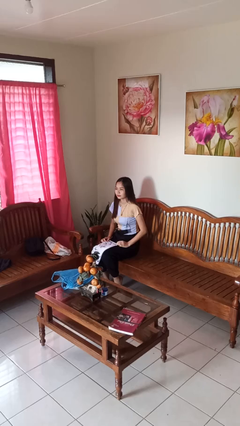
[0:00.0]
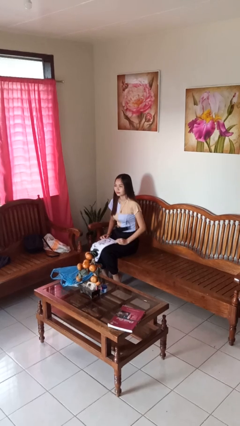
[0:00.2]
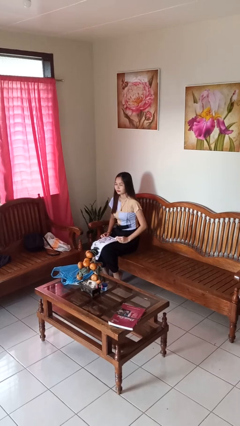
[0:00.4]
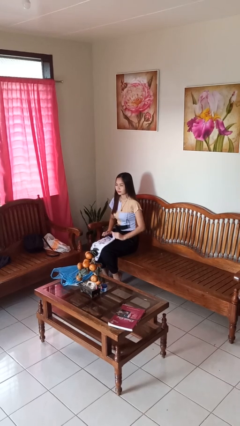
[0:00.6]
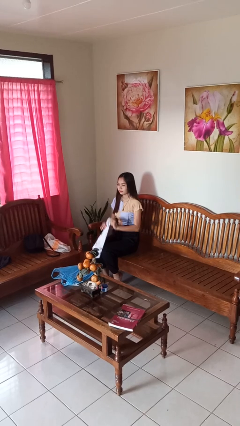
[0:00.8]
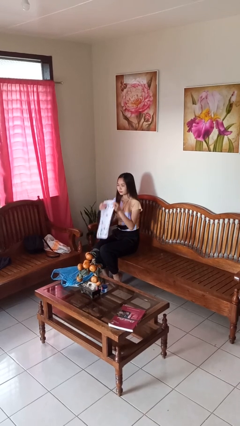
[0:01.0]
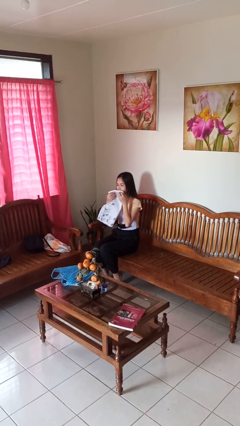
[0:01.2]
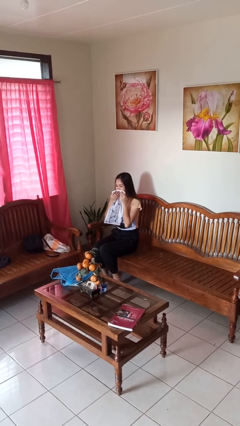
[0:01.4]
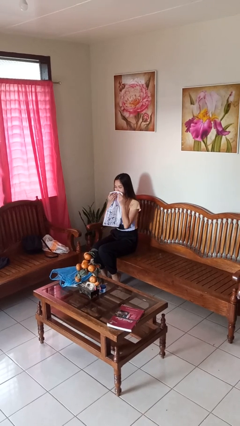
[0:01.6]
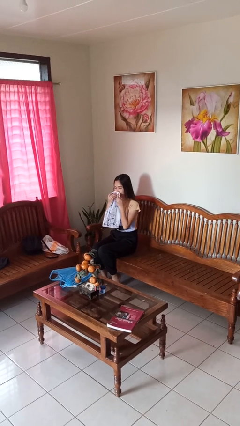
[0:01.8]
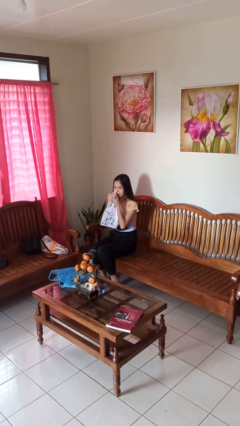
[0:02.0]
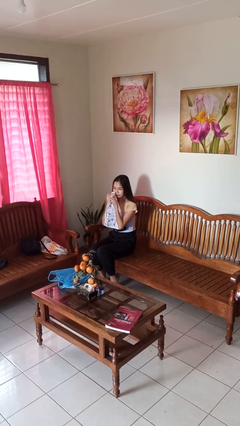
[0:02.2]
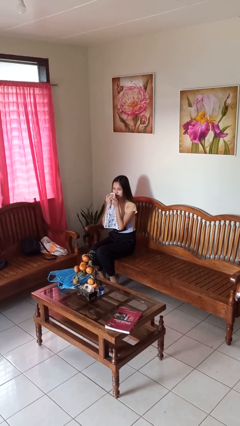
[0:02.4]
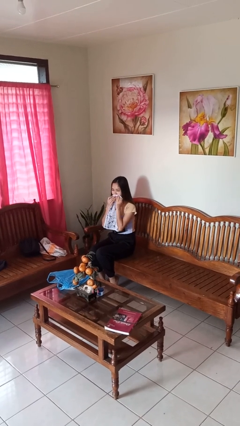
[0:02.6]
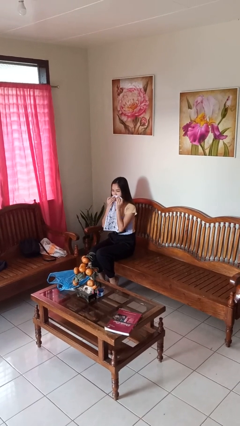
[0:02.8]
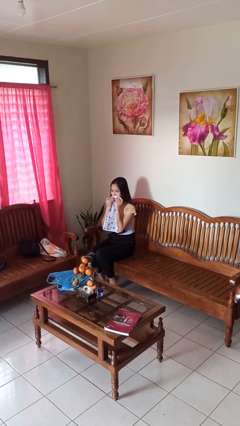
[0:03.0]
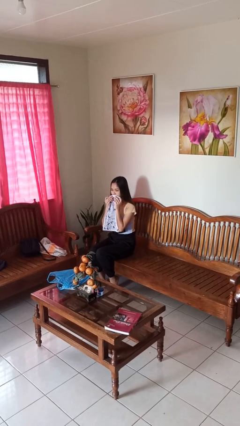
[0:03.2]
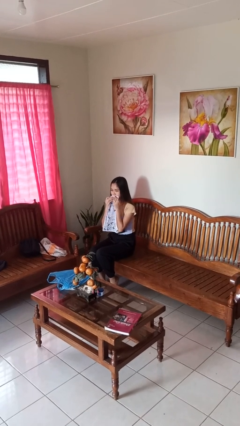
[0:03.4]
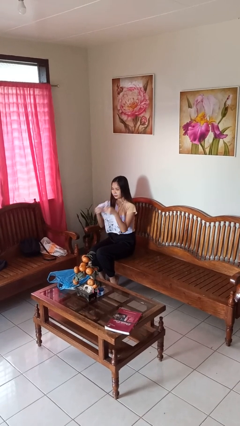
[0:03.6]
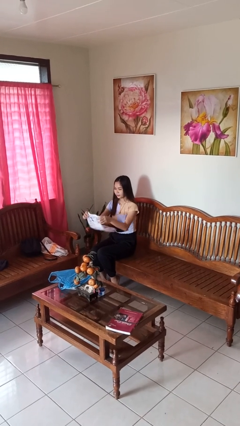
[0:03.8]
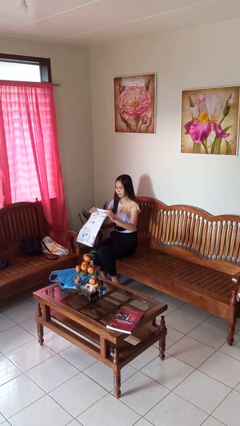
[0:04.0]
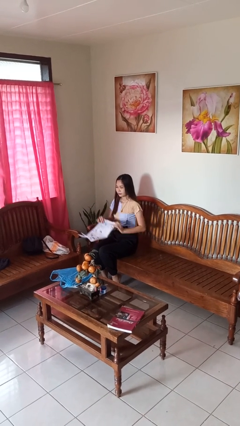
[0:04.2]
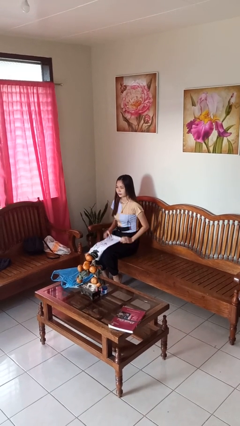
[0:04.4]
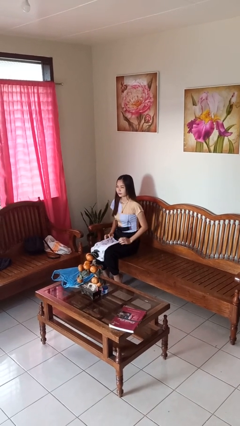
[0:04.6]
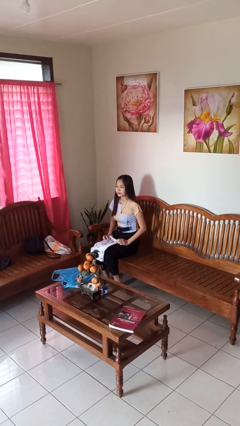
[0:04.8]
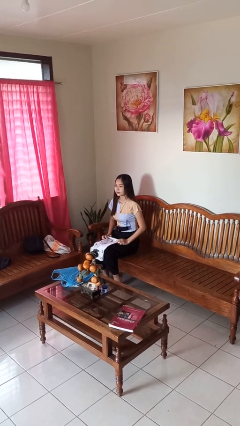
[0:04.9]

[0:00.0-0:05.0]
person wipes mouth with napkin

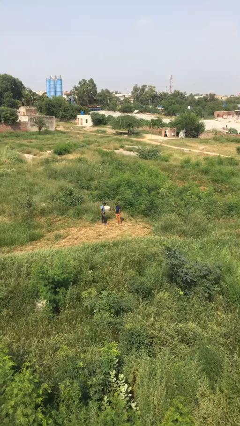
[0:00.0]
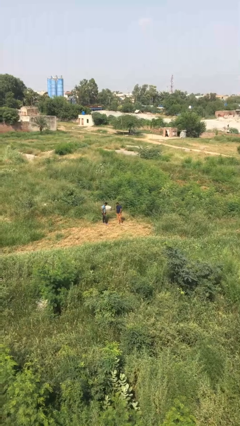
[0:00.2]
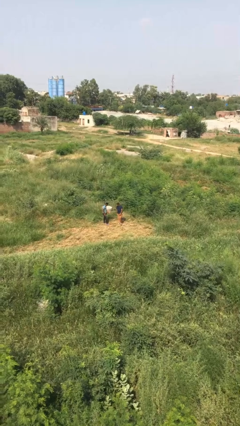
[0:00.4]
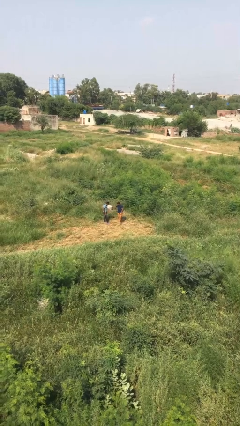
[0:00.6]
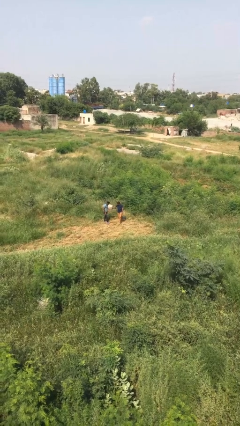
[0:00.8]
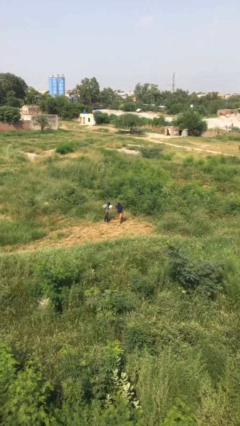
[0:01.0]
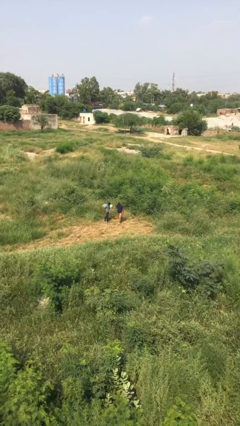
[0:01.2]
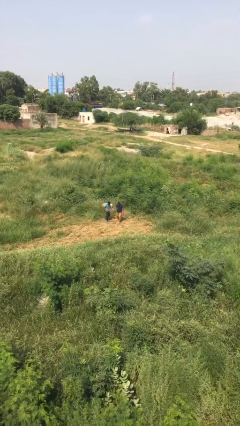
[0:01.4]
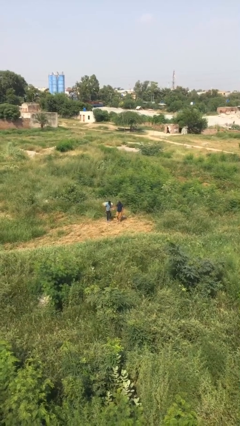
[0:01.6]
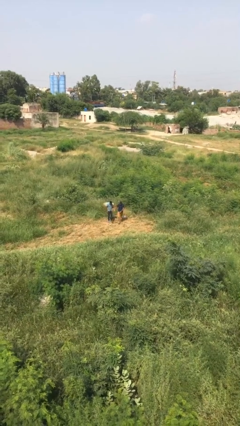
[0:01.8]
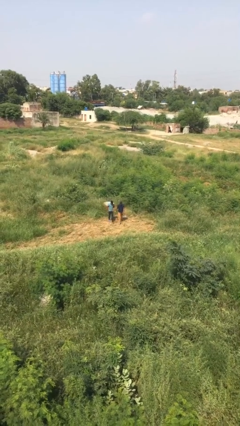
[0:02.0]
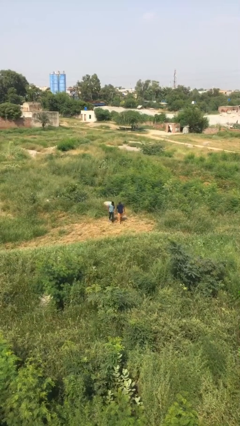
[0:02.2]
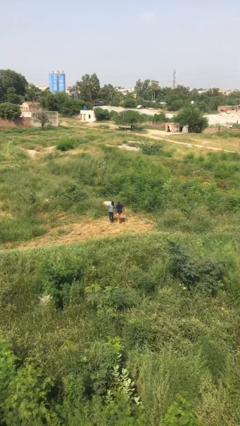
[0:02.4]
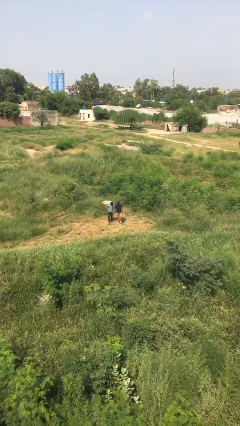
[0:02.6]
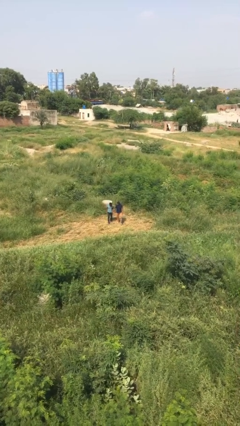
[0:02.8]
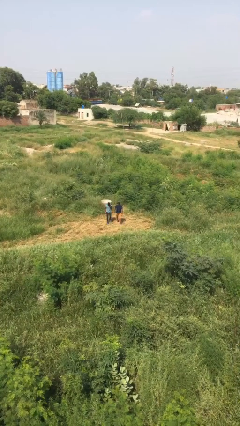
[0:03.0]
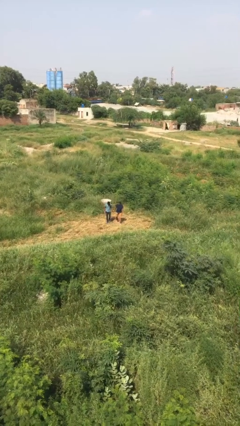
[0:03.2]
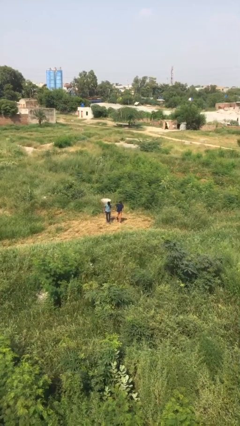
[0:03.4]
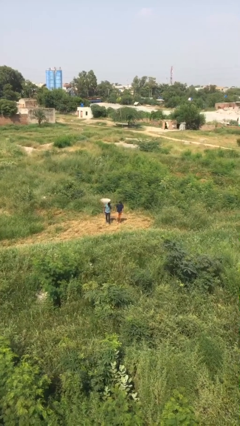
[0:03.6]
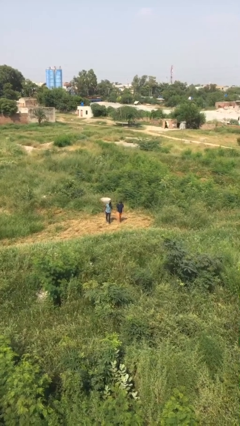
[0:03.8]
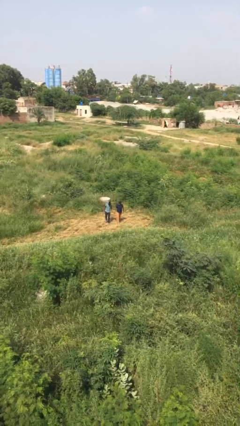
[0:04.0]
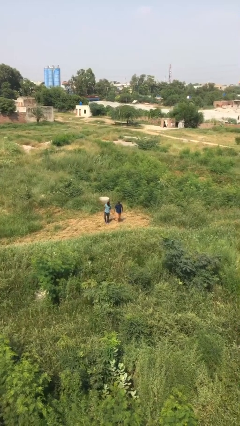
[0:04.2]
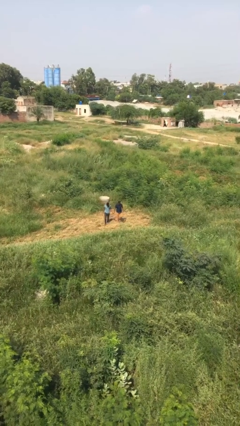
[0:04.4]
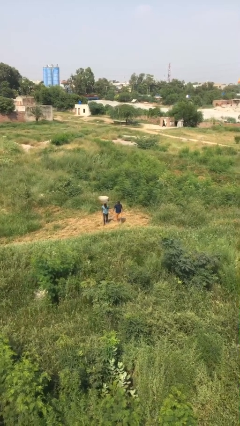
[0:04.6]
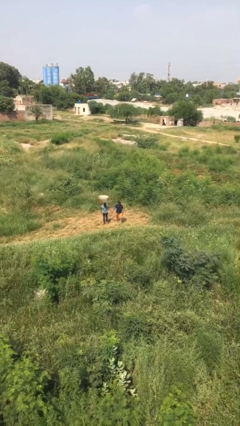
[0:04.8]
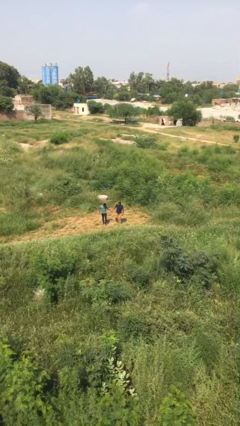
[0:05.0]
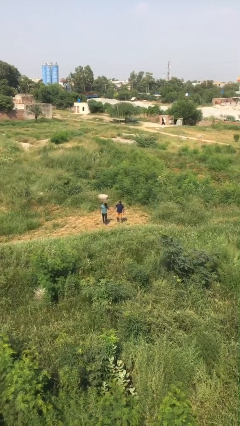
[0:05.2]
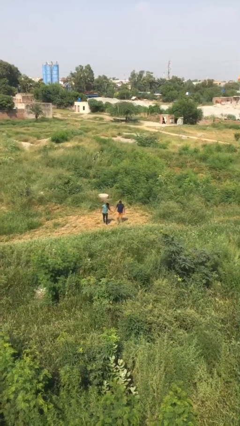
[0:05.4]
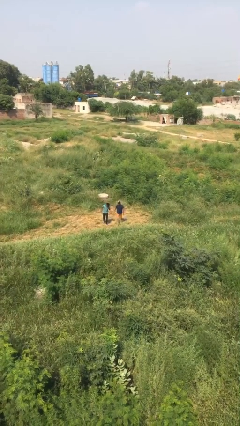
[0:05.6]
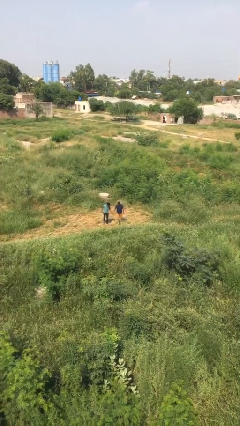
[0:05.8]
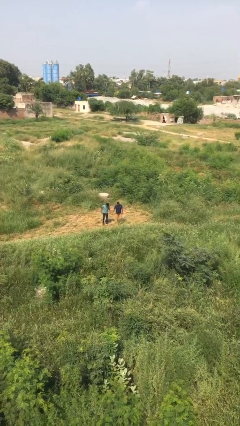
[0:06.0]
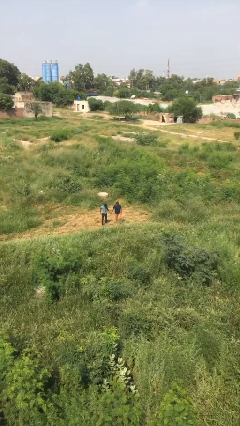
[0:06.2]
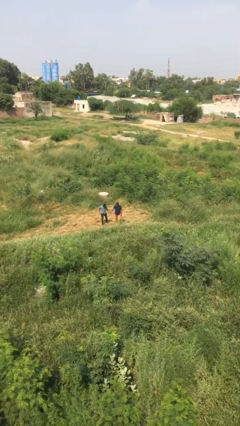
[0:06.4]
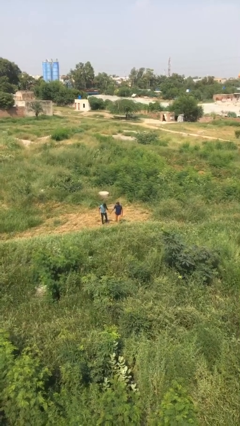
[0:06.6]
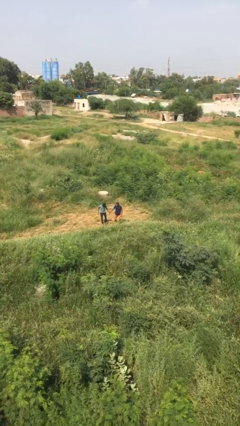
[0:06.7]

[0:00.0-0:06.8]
person holds hand

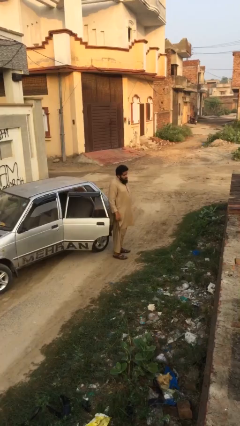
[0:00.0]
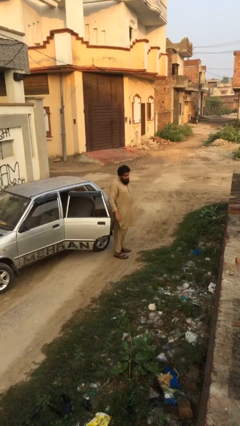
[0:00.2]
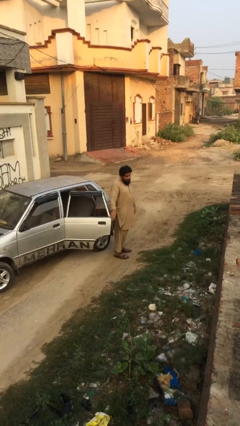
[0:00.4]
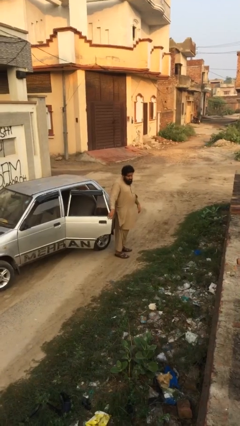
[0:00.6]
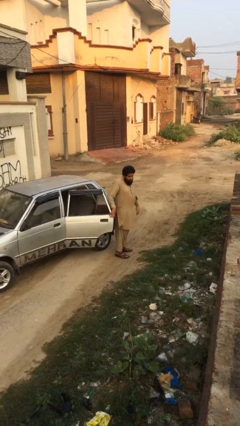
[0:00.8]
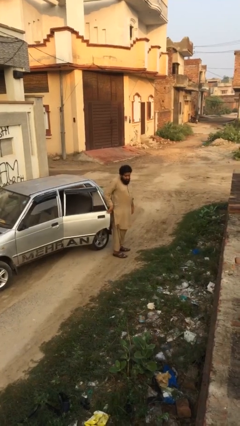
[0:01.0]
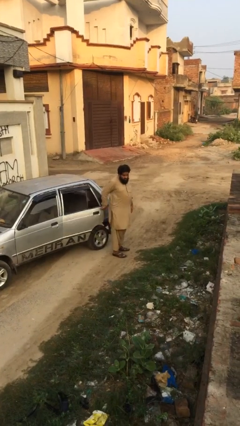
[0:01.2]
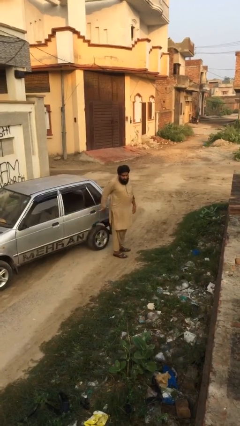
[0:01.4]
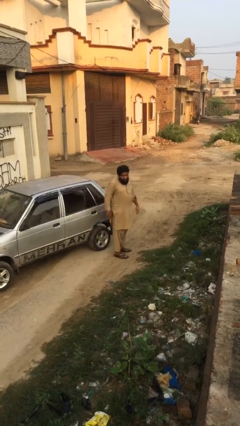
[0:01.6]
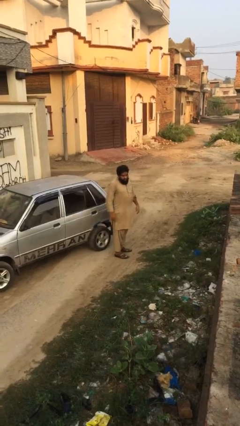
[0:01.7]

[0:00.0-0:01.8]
person closes car door

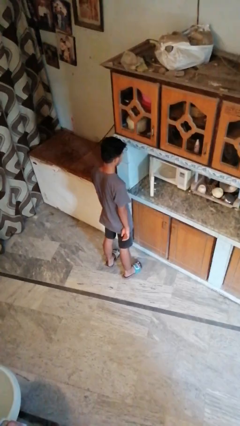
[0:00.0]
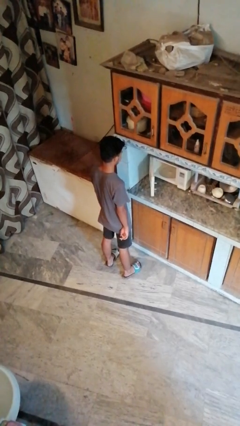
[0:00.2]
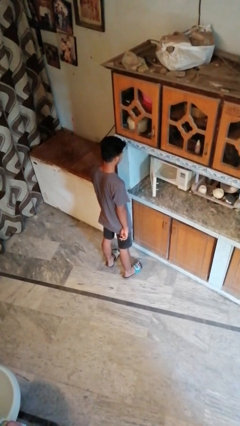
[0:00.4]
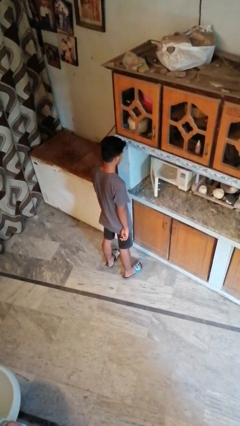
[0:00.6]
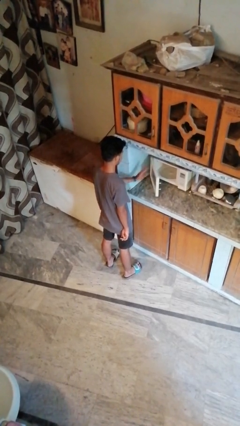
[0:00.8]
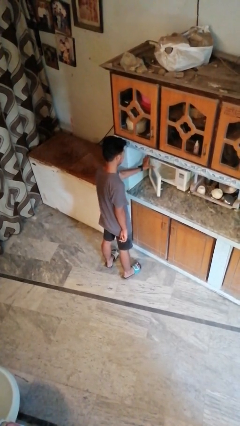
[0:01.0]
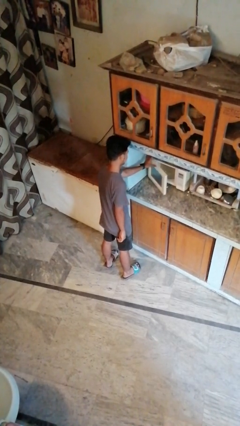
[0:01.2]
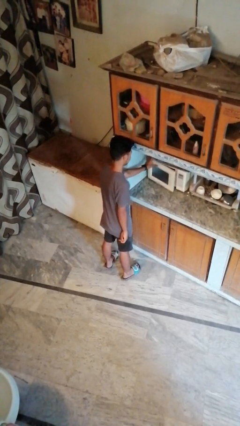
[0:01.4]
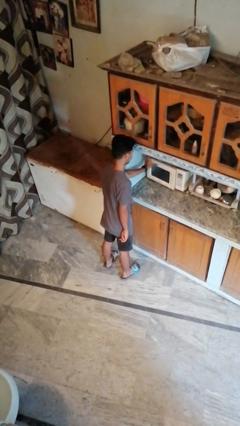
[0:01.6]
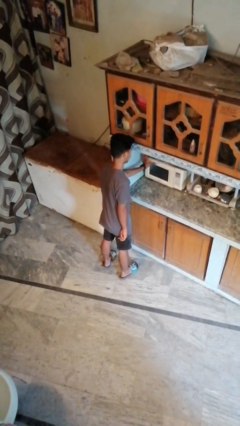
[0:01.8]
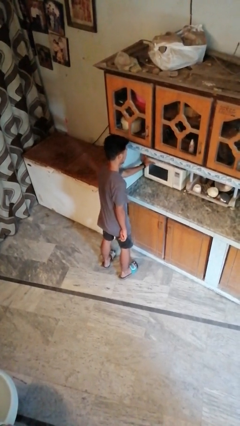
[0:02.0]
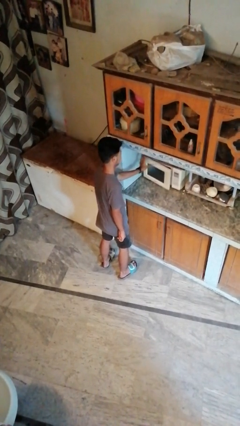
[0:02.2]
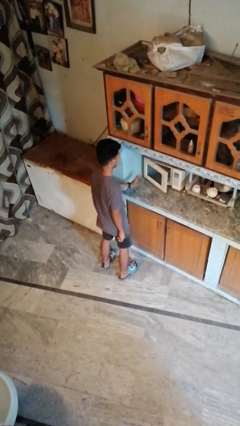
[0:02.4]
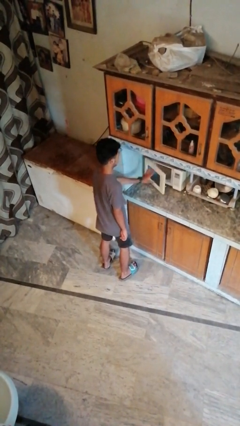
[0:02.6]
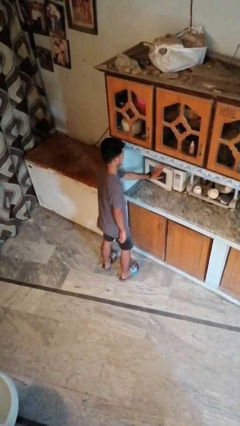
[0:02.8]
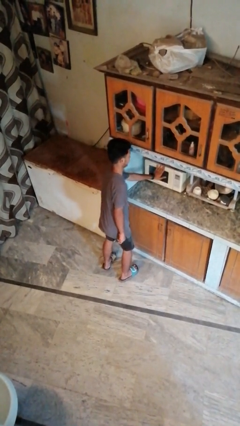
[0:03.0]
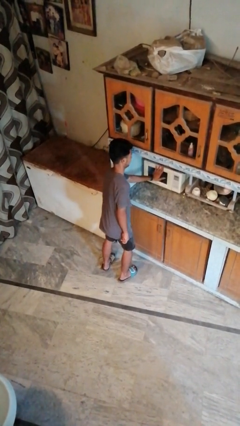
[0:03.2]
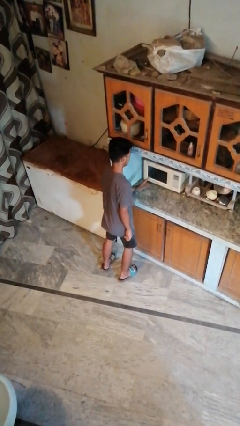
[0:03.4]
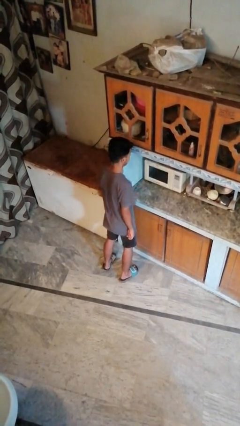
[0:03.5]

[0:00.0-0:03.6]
person closes oven door

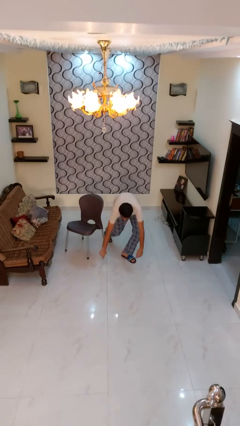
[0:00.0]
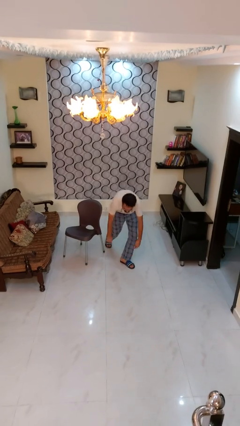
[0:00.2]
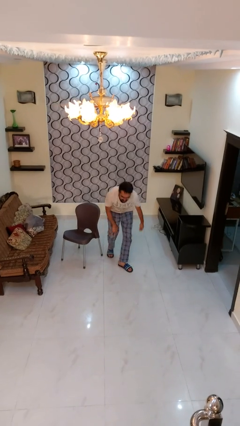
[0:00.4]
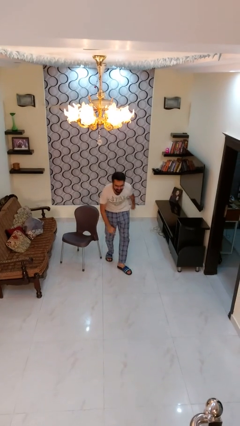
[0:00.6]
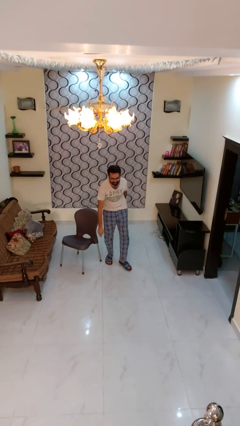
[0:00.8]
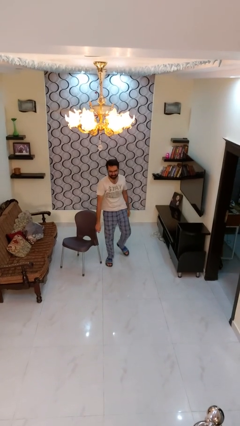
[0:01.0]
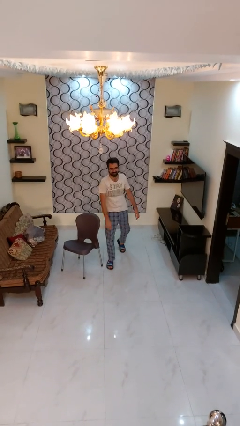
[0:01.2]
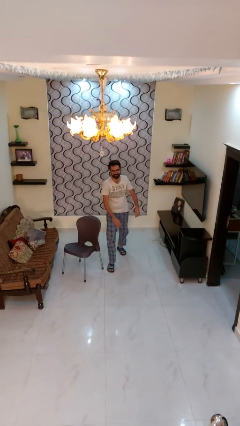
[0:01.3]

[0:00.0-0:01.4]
person stands up from floor
